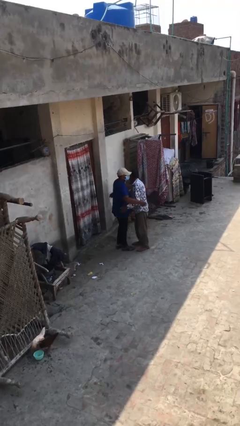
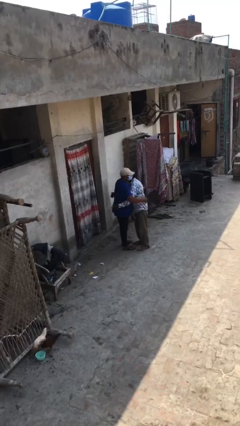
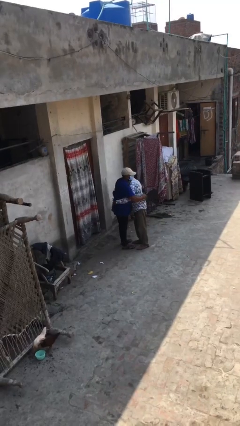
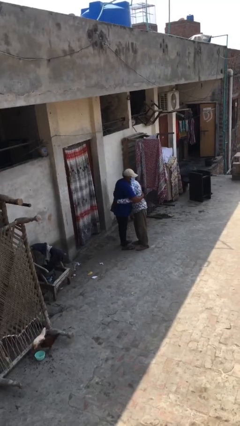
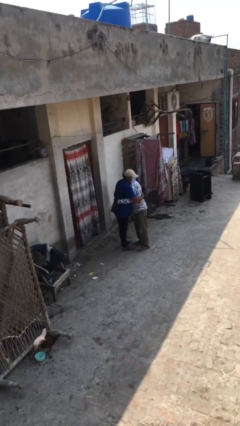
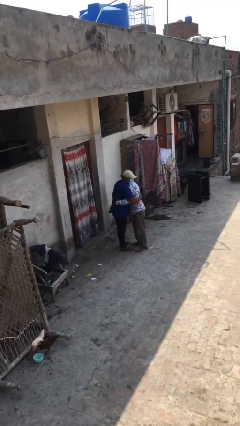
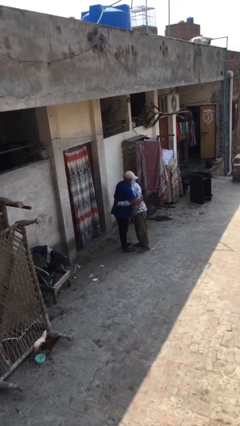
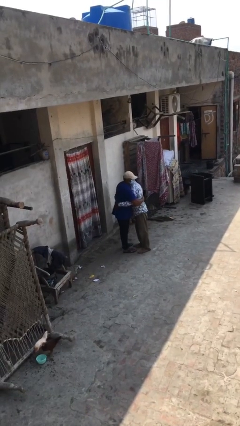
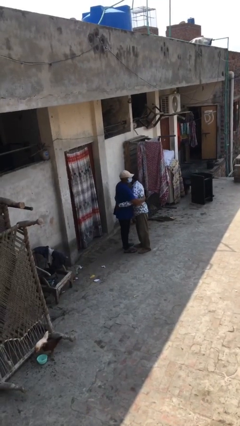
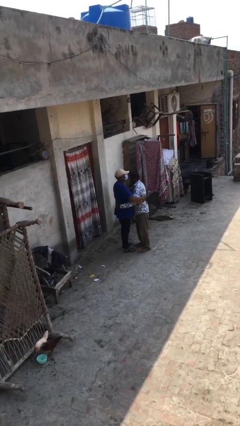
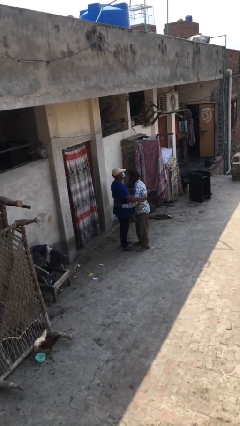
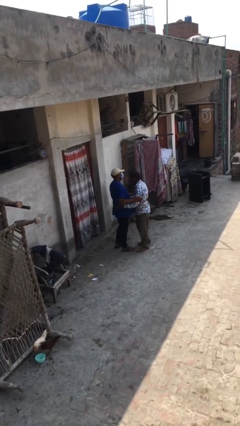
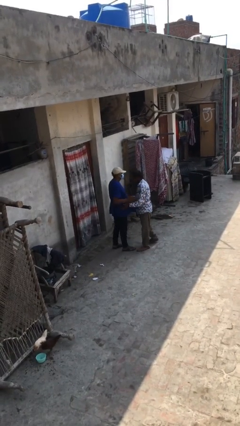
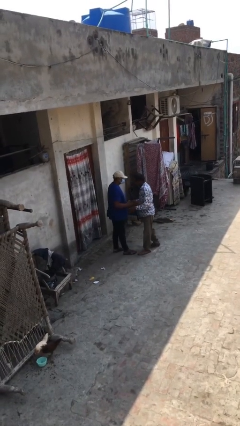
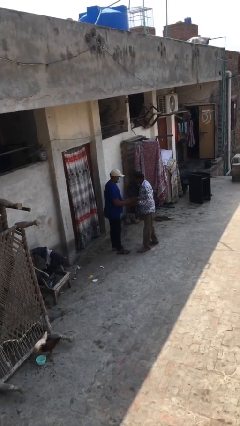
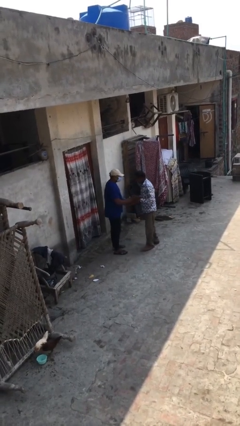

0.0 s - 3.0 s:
person embraces person

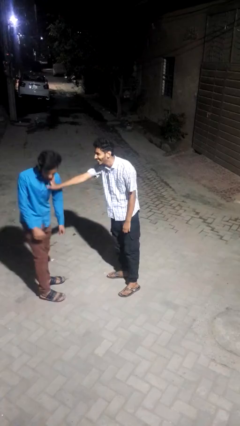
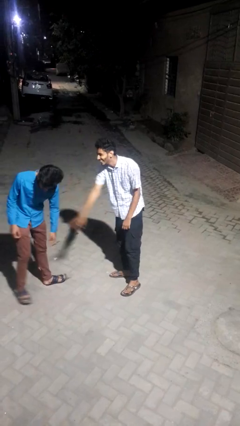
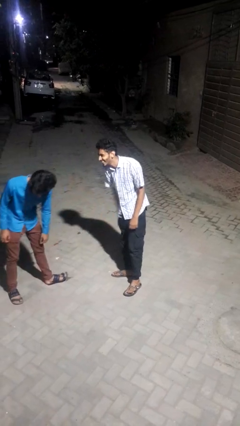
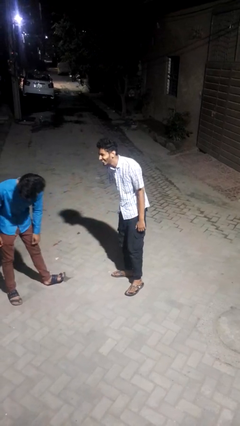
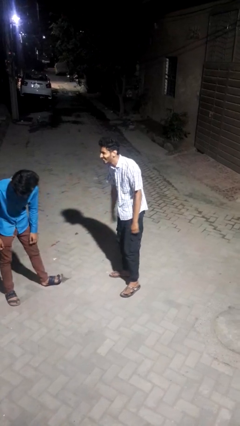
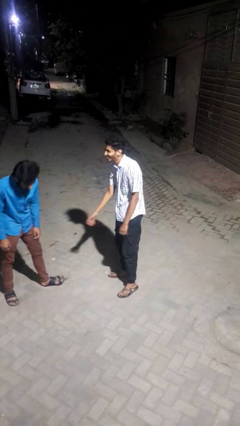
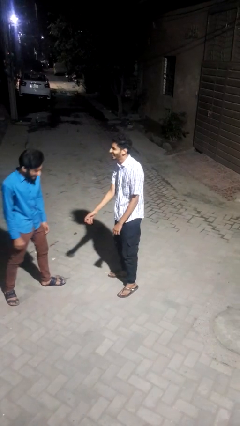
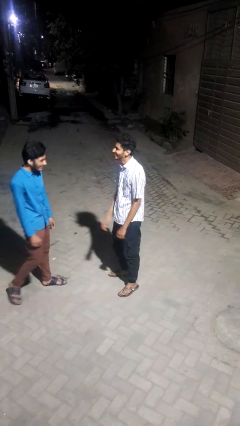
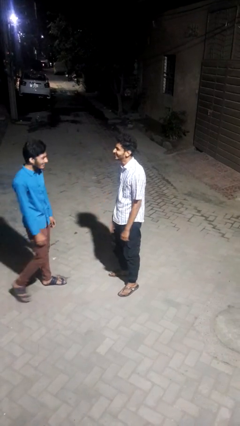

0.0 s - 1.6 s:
person shoves person

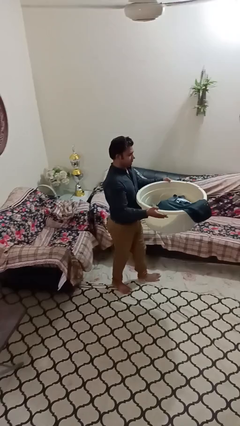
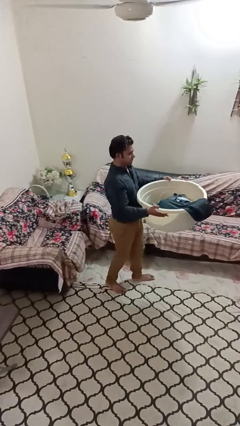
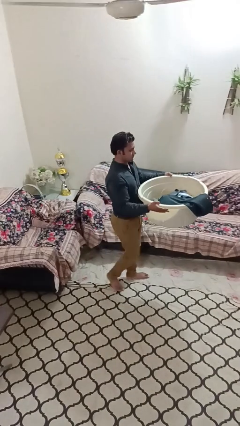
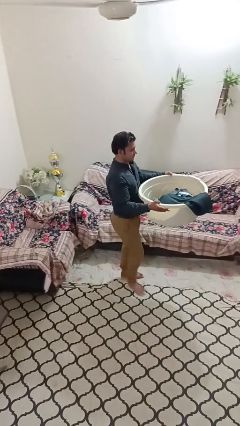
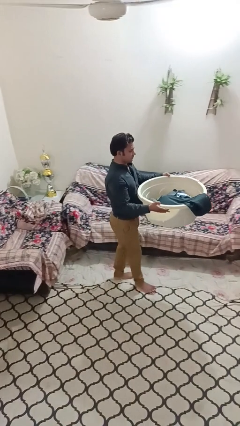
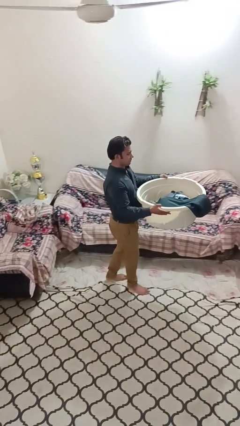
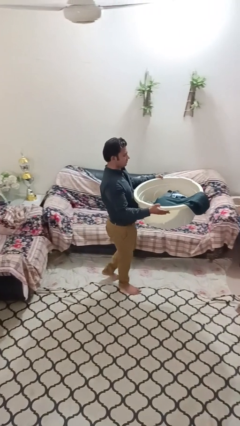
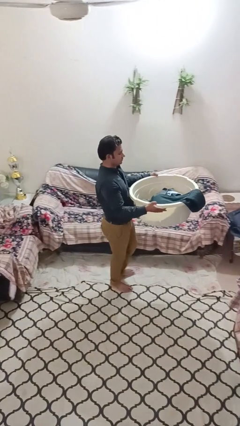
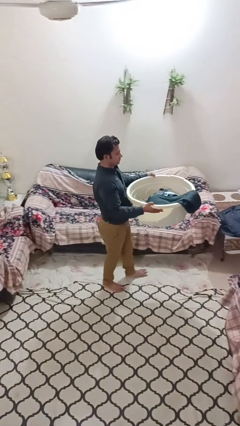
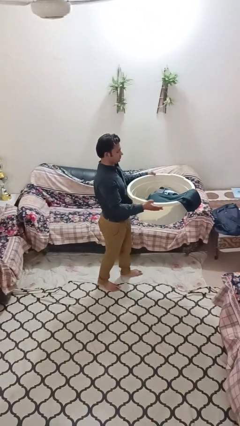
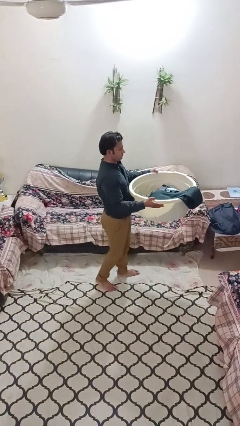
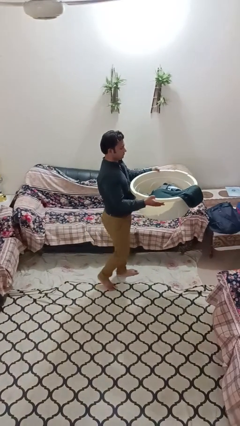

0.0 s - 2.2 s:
person carries laundry basket

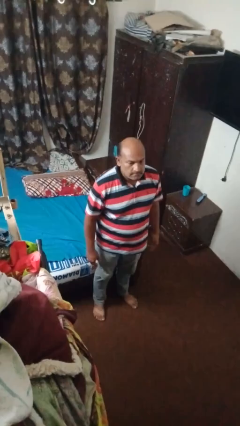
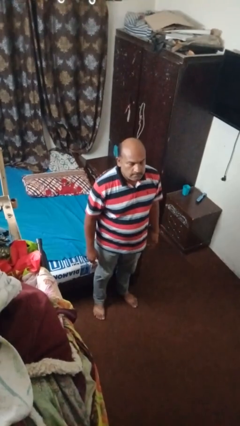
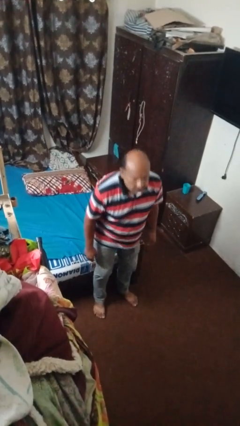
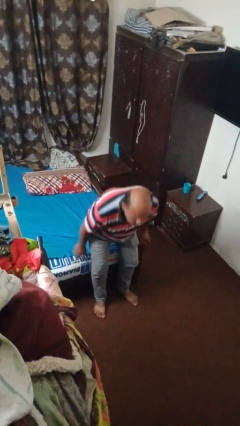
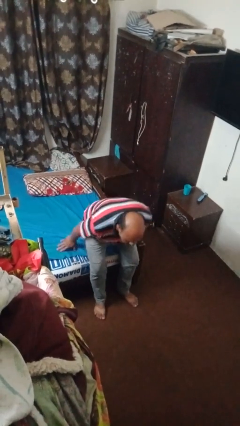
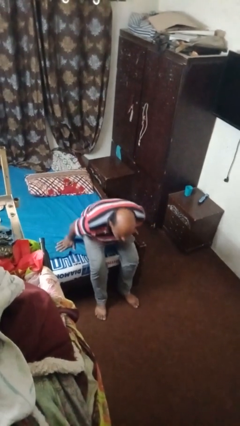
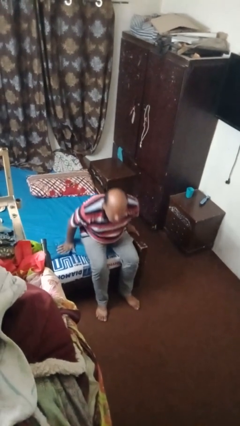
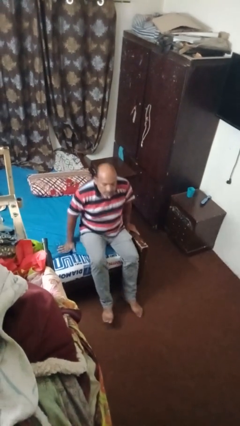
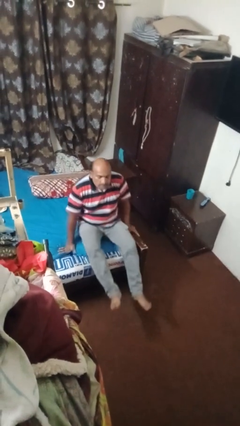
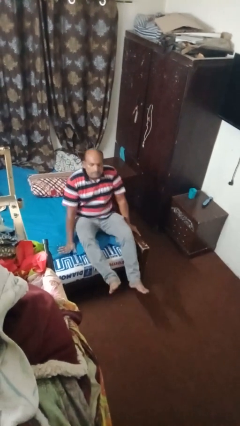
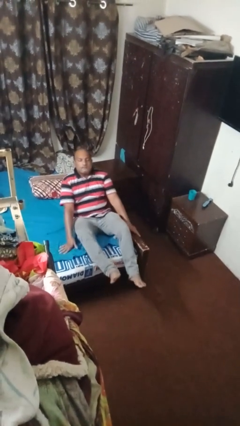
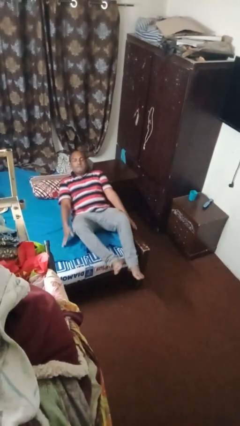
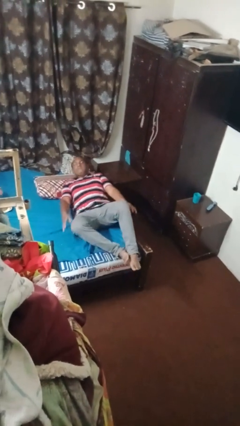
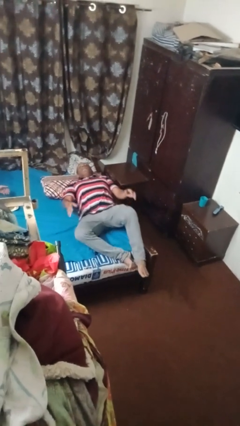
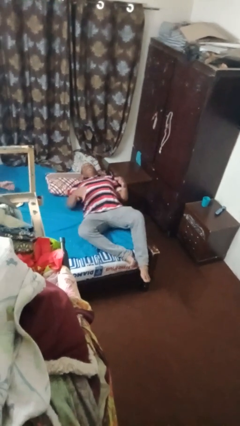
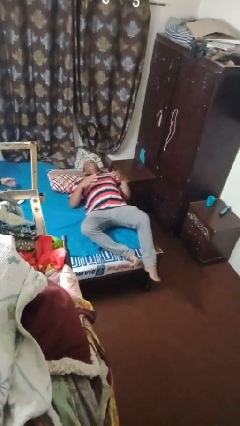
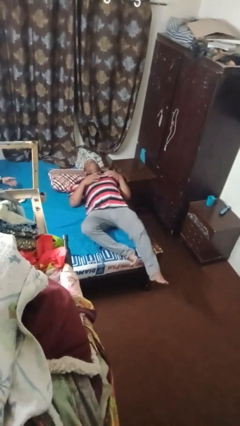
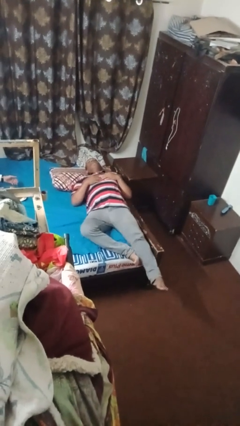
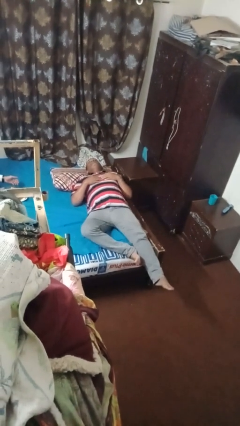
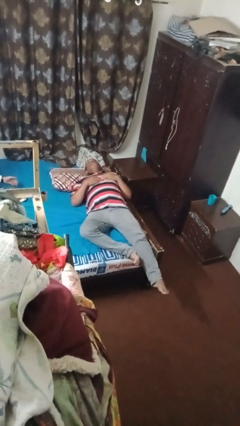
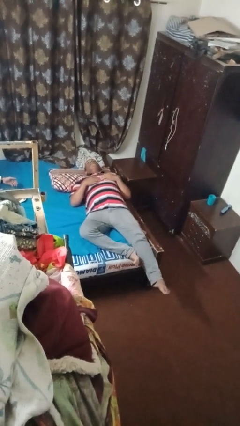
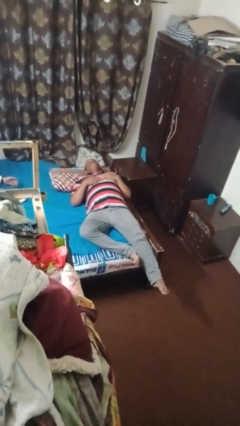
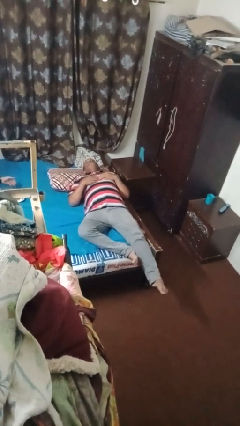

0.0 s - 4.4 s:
person lies down on bed

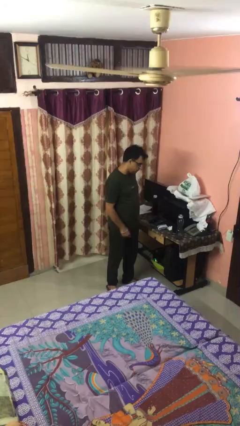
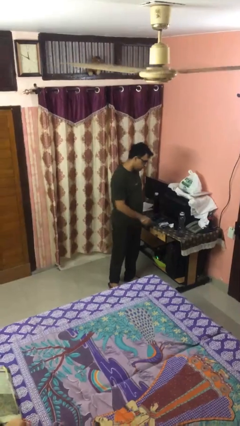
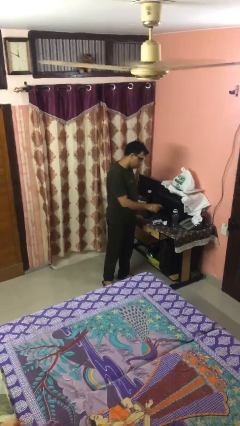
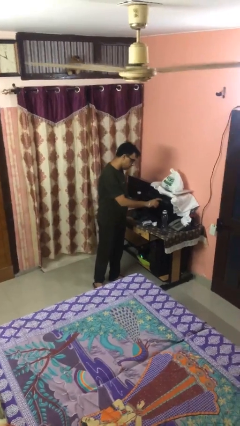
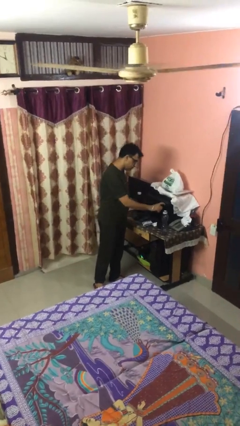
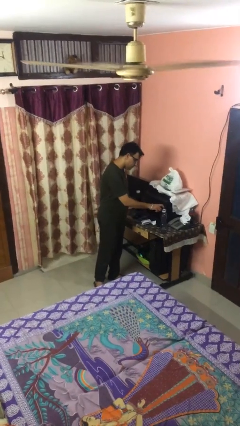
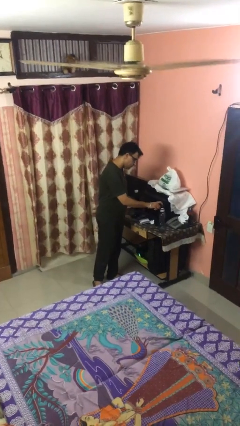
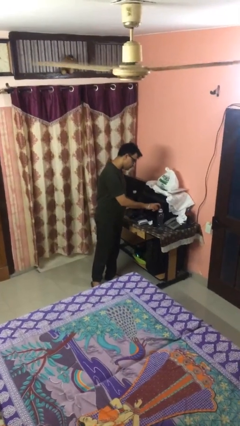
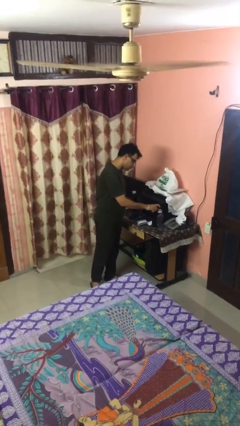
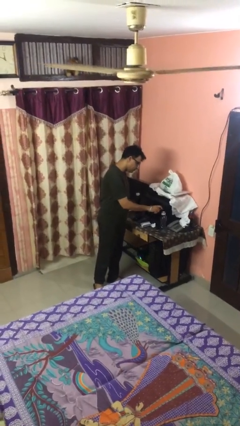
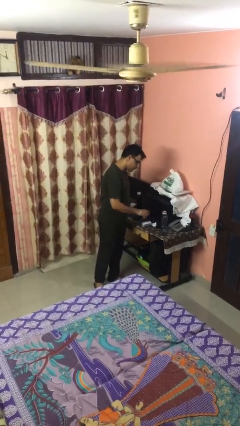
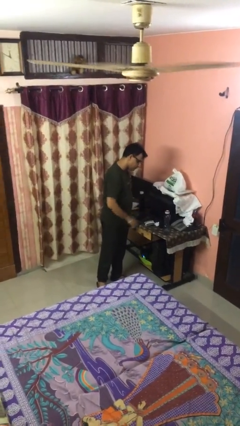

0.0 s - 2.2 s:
person taps object with finger

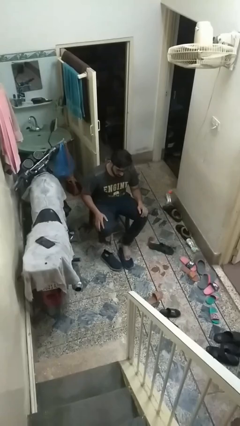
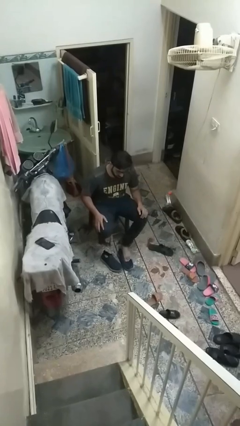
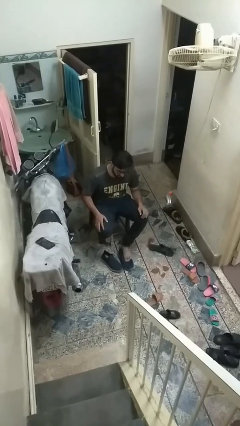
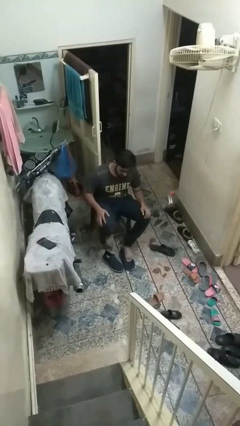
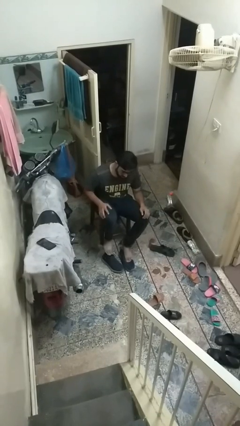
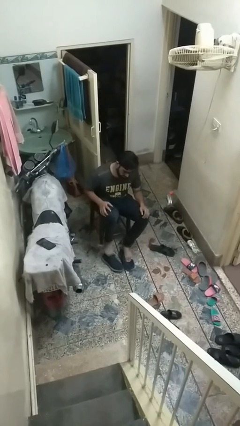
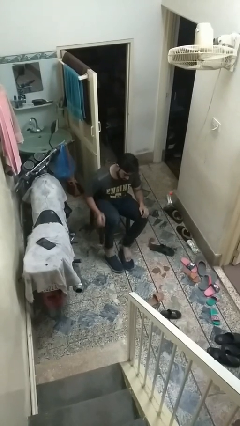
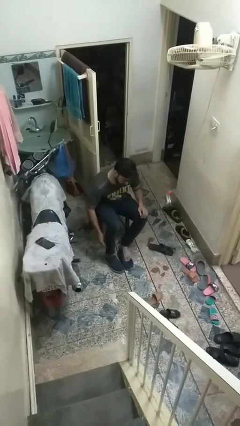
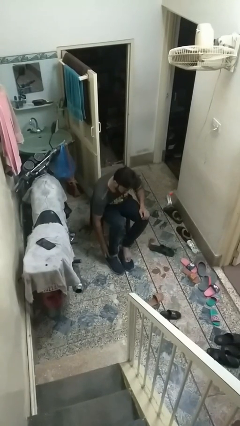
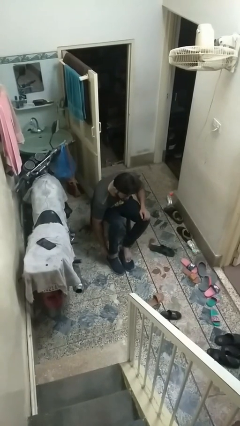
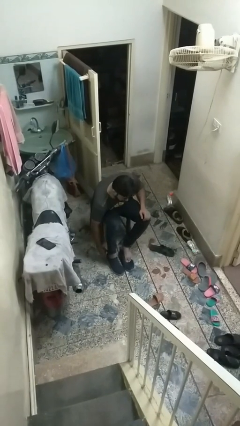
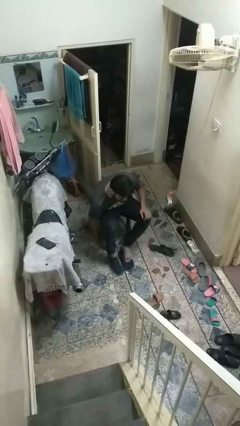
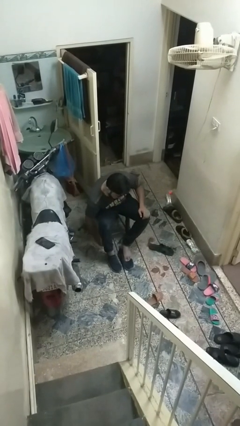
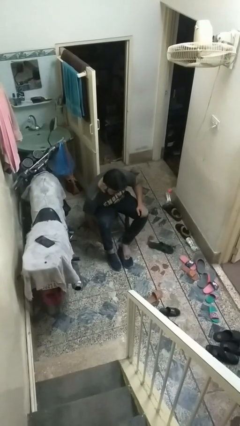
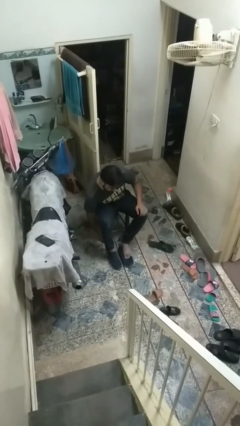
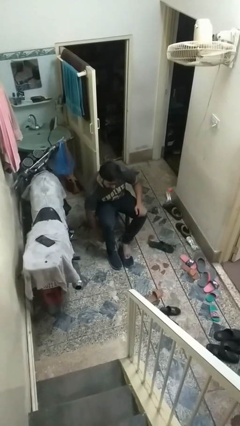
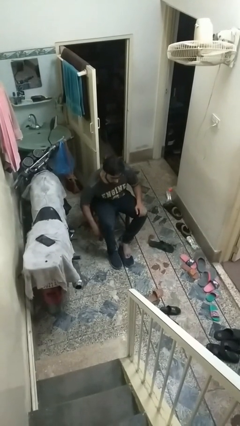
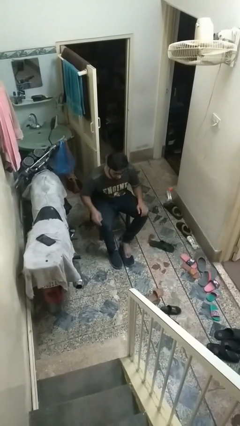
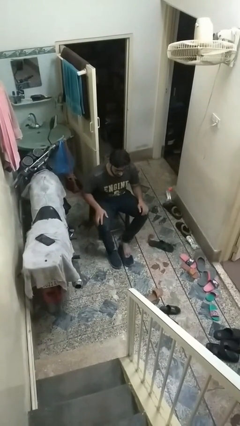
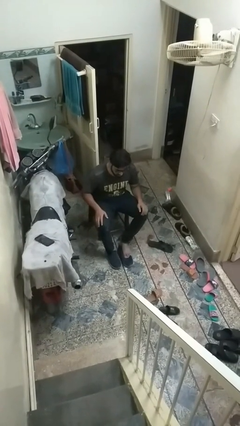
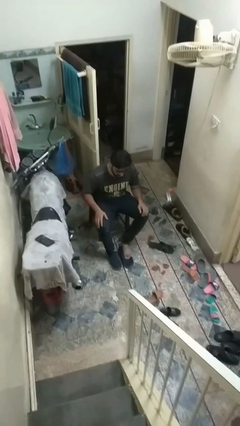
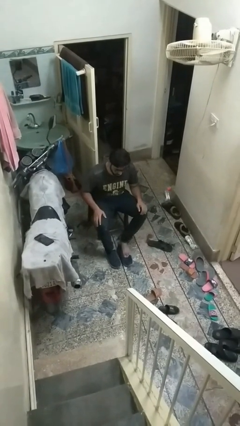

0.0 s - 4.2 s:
person puts on shoes

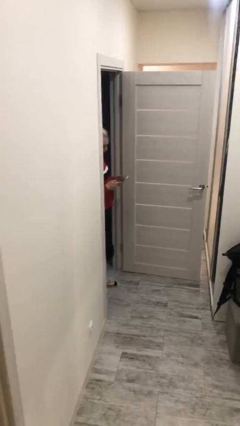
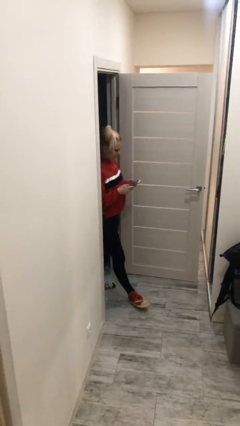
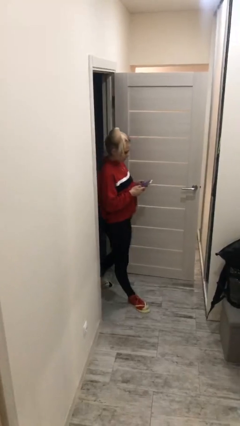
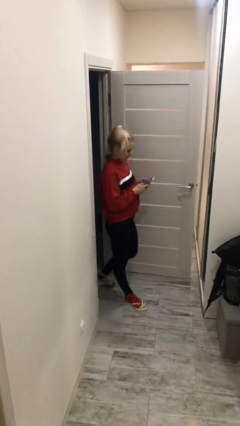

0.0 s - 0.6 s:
person enters scene through structure
